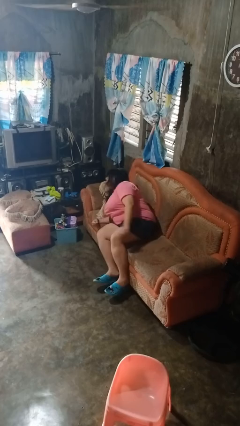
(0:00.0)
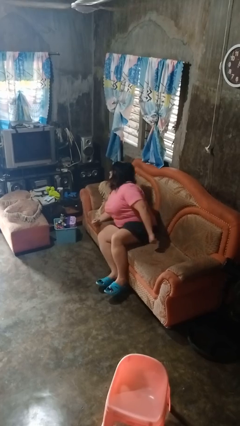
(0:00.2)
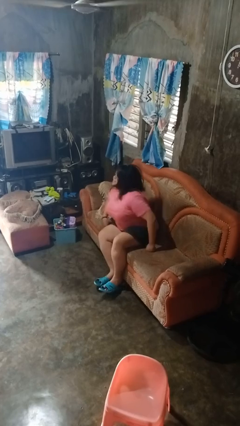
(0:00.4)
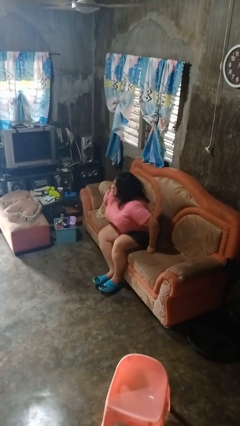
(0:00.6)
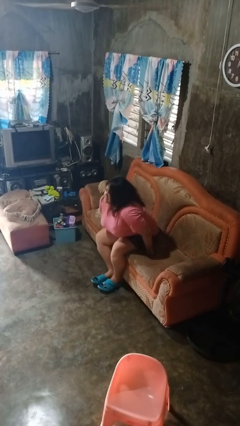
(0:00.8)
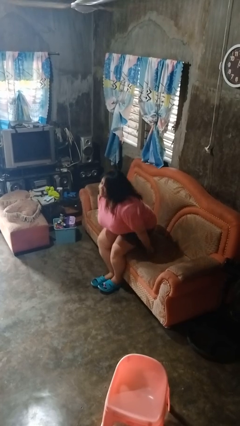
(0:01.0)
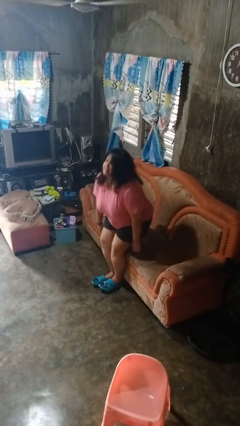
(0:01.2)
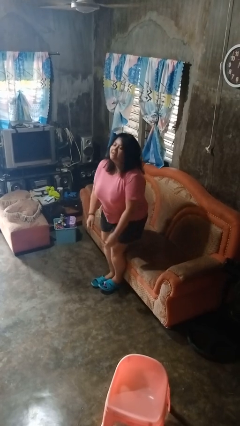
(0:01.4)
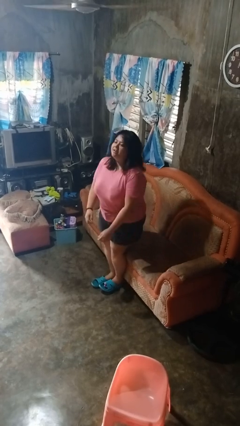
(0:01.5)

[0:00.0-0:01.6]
person stands up

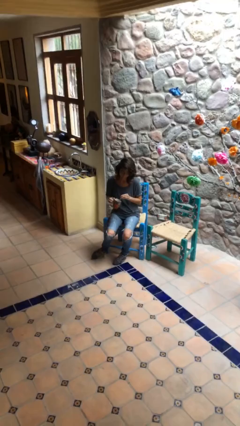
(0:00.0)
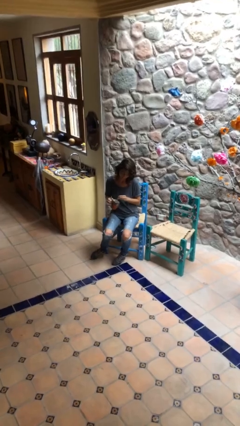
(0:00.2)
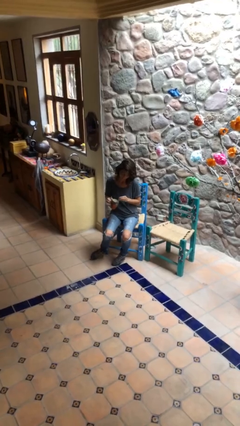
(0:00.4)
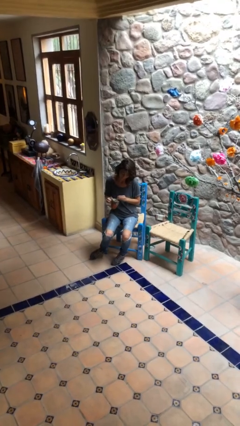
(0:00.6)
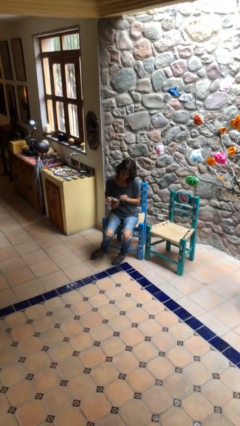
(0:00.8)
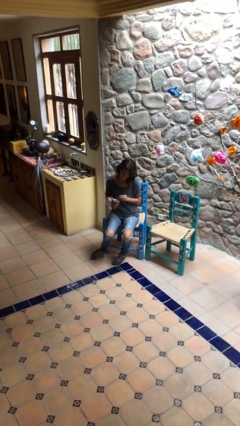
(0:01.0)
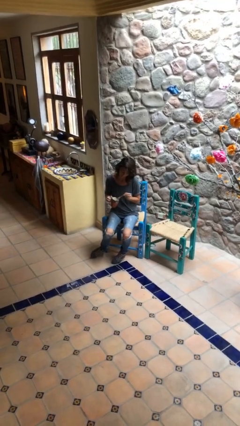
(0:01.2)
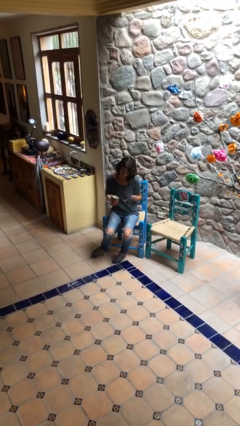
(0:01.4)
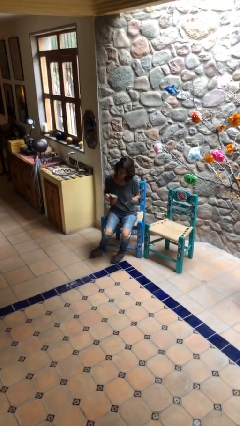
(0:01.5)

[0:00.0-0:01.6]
person stirs mug

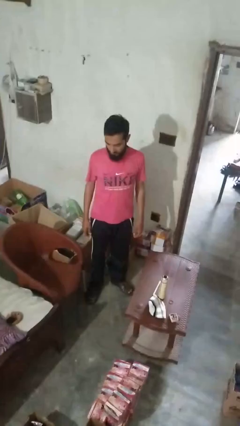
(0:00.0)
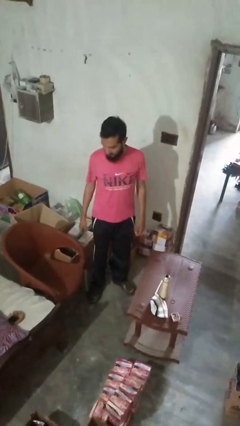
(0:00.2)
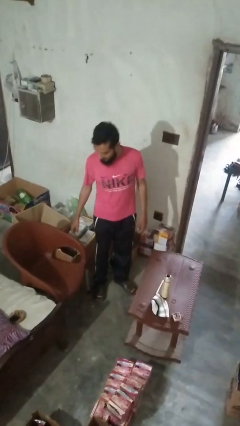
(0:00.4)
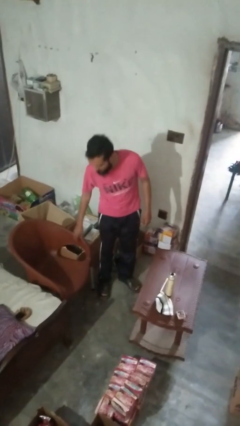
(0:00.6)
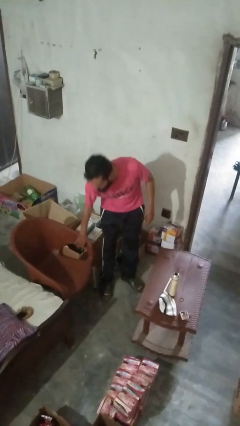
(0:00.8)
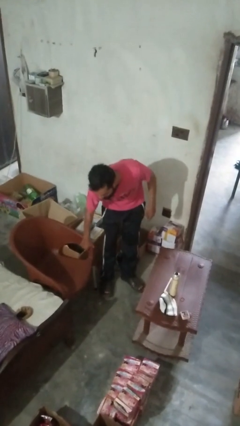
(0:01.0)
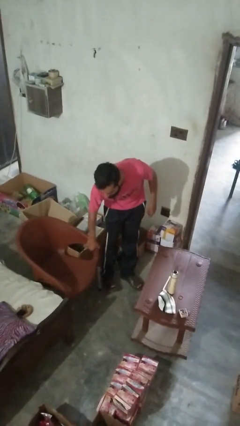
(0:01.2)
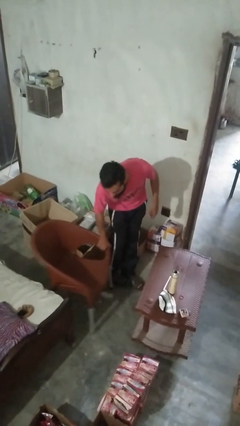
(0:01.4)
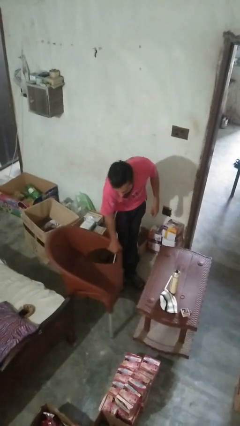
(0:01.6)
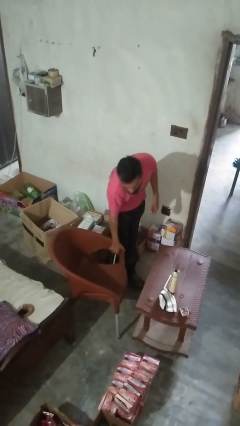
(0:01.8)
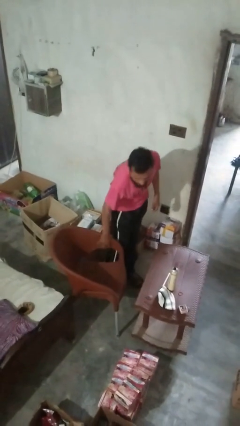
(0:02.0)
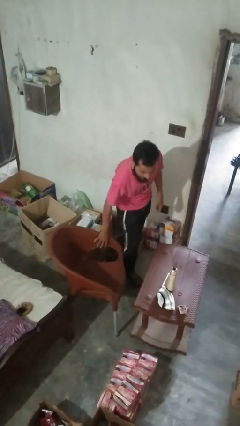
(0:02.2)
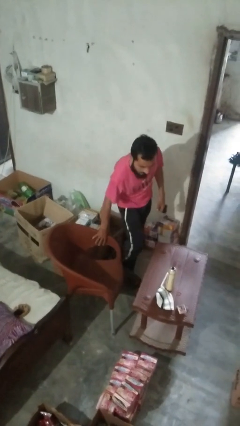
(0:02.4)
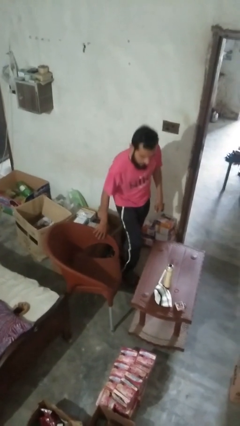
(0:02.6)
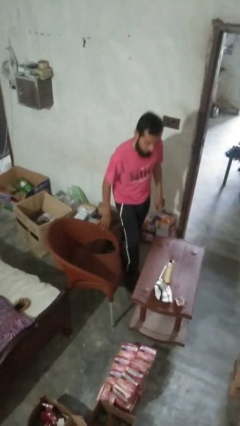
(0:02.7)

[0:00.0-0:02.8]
person pulls out chair

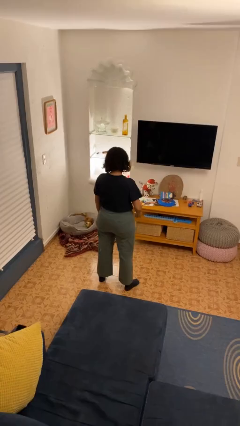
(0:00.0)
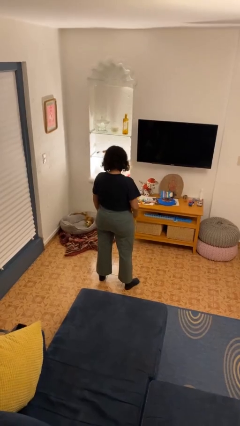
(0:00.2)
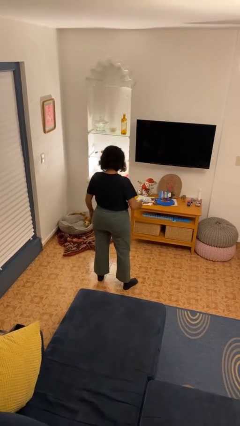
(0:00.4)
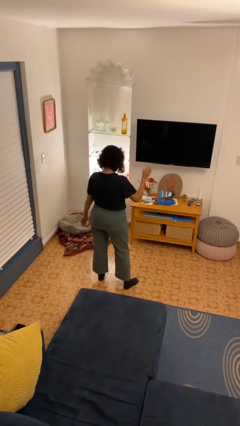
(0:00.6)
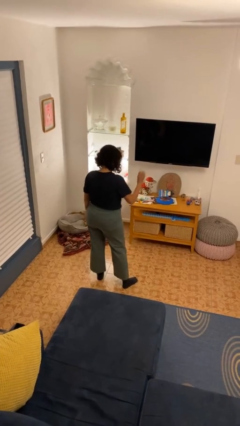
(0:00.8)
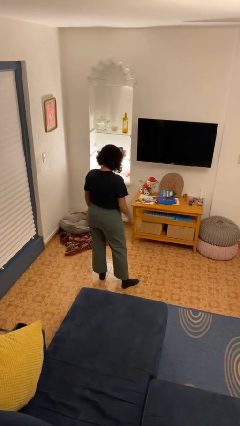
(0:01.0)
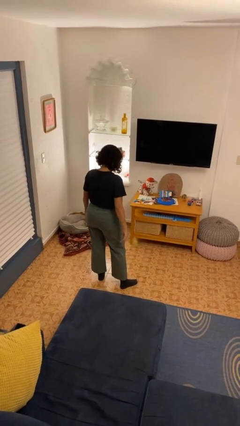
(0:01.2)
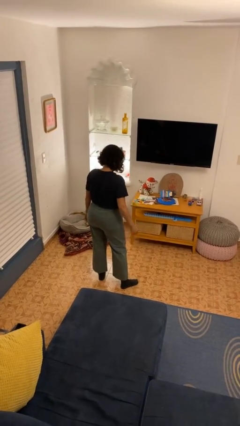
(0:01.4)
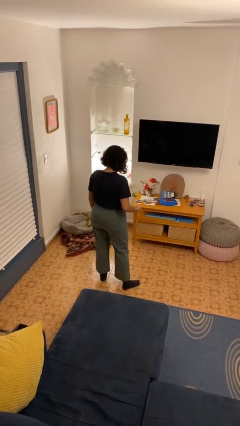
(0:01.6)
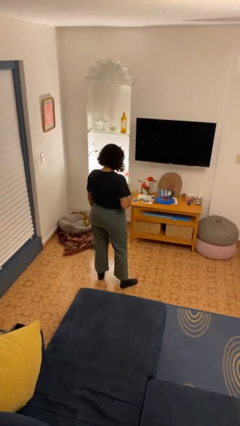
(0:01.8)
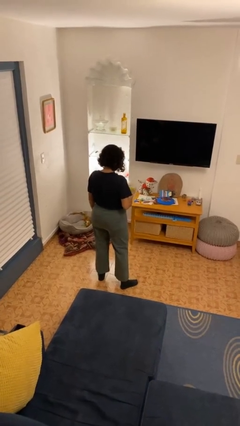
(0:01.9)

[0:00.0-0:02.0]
person bounces ball on floor

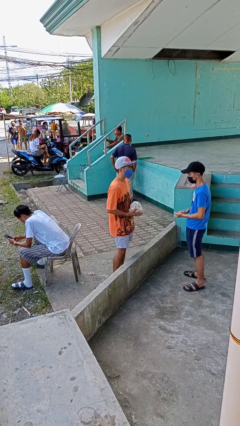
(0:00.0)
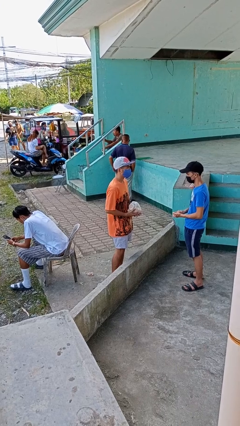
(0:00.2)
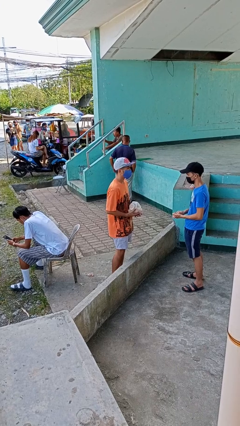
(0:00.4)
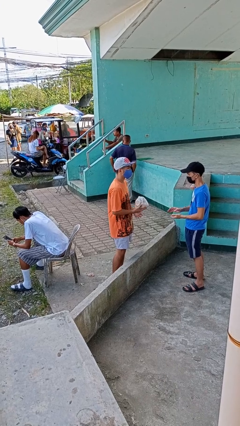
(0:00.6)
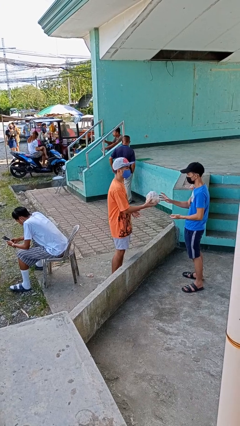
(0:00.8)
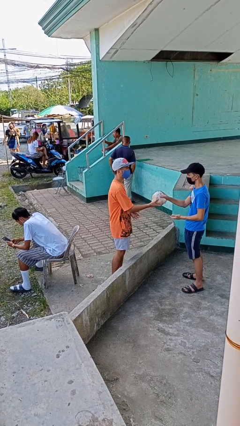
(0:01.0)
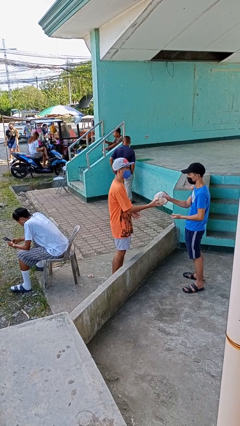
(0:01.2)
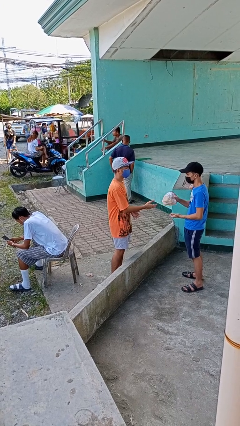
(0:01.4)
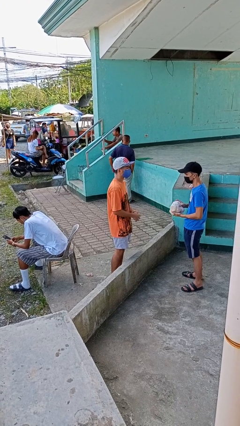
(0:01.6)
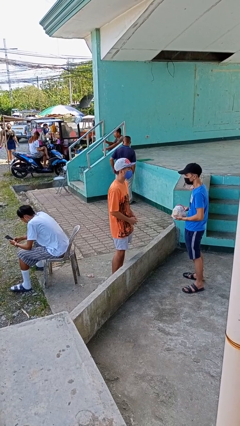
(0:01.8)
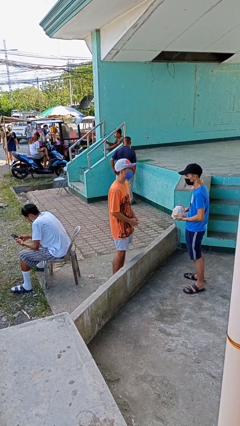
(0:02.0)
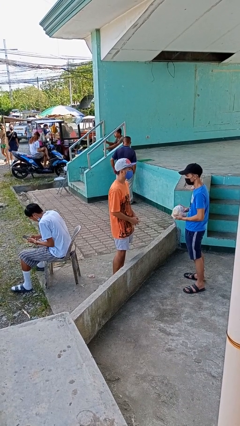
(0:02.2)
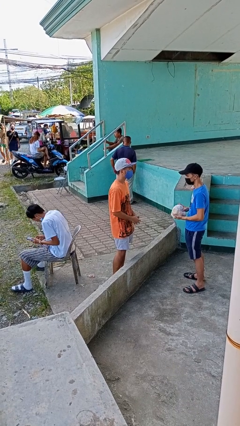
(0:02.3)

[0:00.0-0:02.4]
person transfers object to person

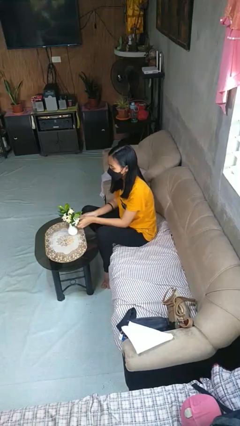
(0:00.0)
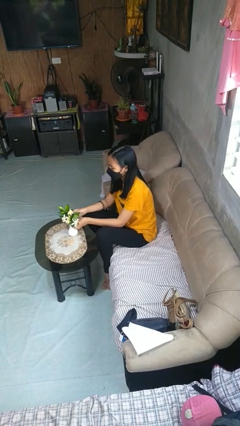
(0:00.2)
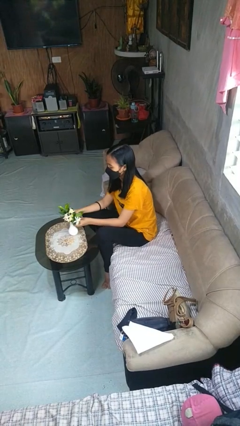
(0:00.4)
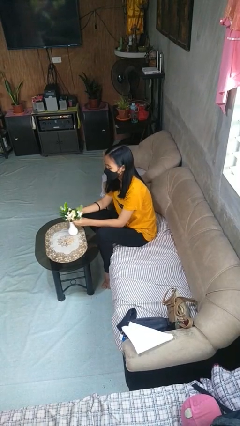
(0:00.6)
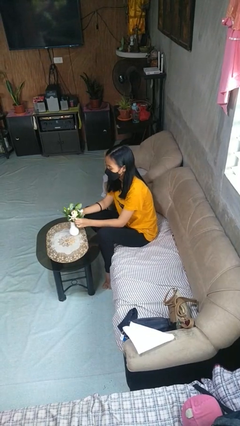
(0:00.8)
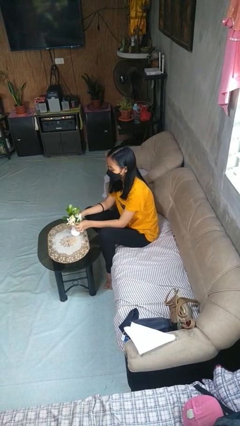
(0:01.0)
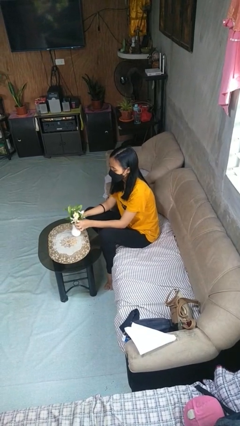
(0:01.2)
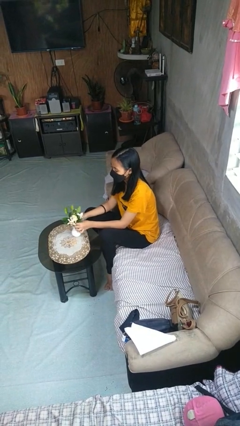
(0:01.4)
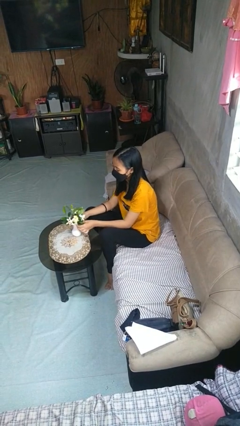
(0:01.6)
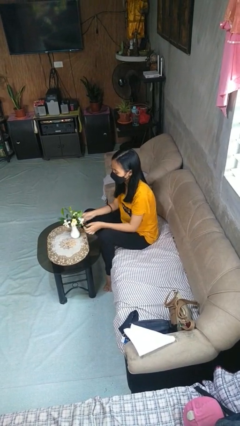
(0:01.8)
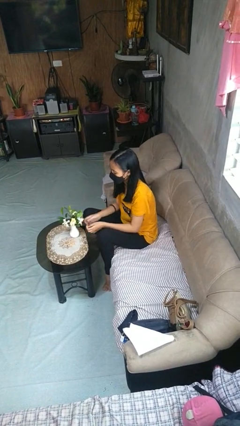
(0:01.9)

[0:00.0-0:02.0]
person arranges flowers in vase

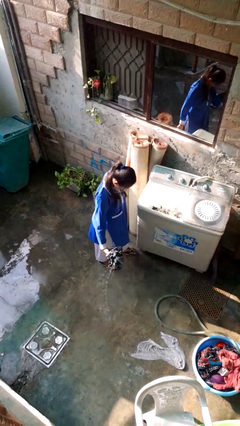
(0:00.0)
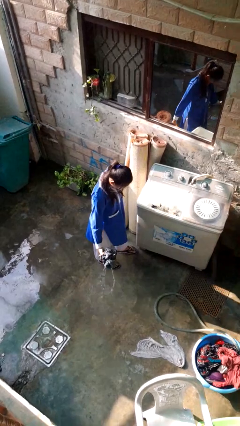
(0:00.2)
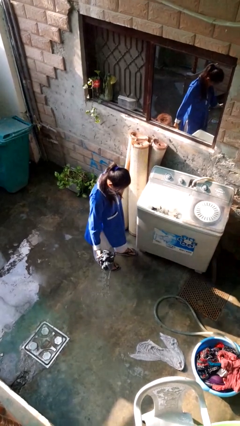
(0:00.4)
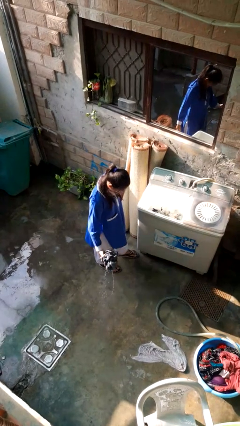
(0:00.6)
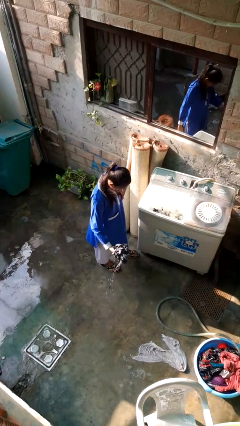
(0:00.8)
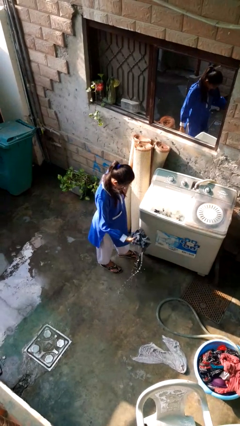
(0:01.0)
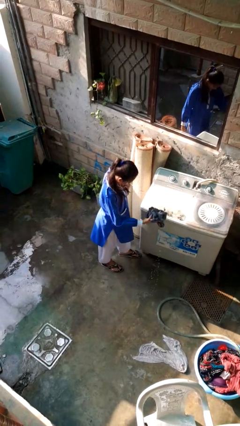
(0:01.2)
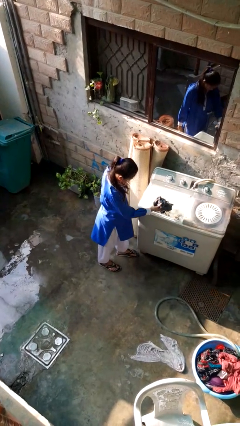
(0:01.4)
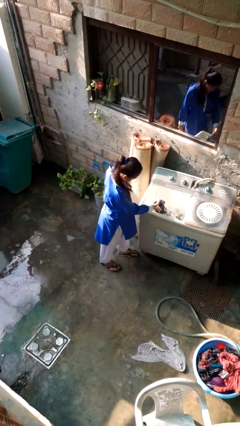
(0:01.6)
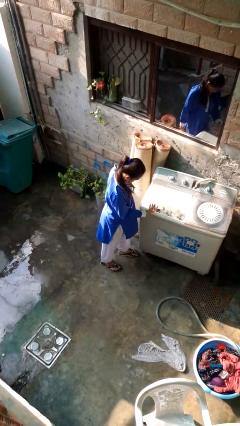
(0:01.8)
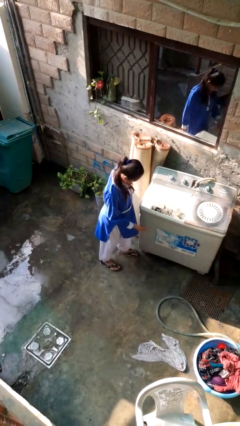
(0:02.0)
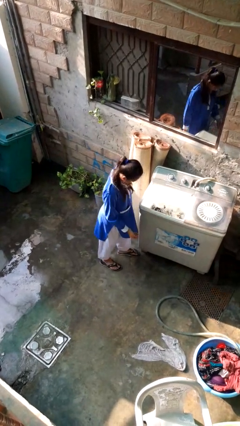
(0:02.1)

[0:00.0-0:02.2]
person loads clotheswasher

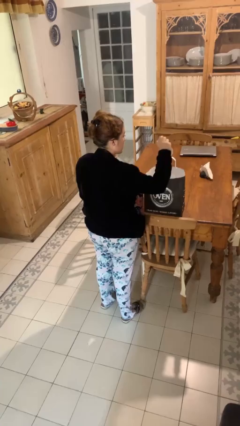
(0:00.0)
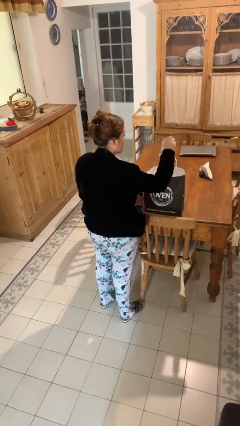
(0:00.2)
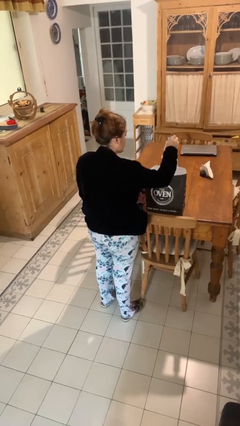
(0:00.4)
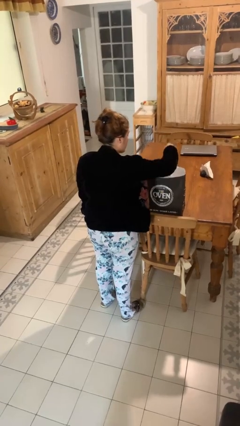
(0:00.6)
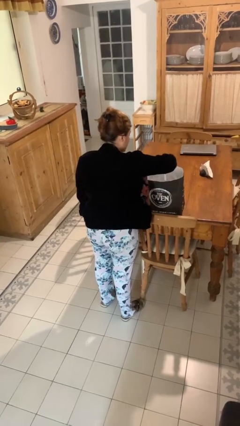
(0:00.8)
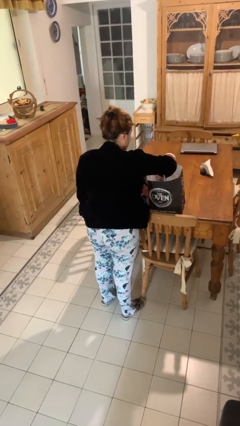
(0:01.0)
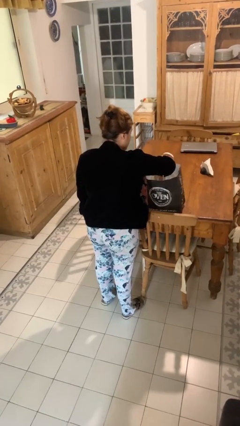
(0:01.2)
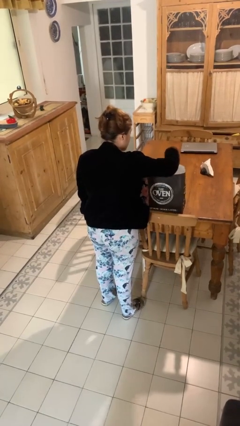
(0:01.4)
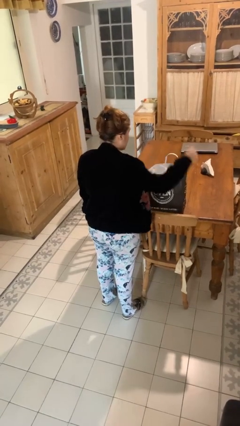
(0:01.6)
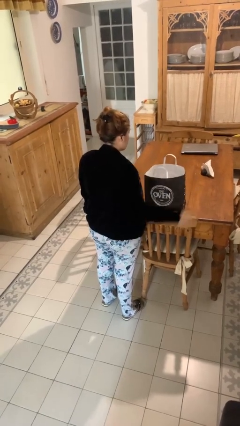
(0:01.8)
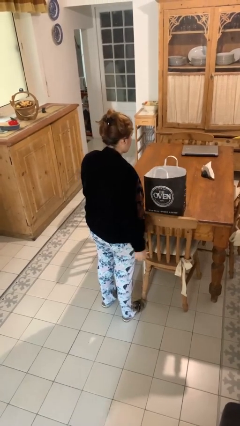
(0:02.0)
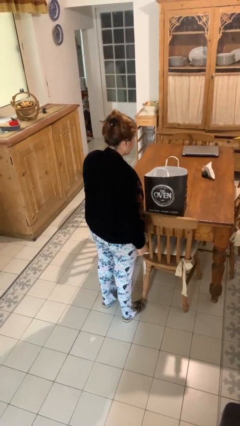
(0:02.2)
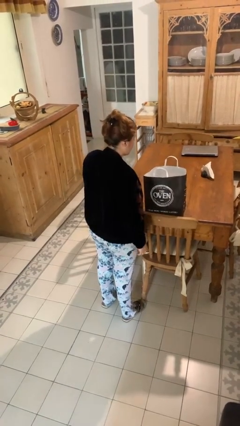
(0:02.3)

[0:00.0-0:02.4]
person puts object into bag
